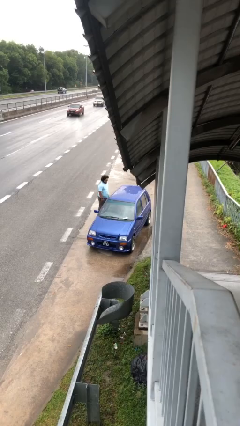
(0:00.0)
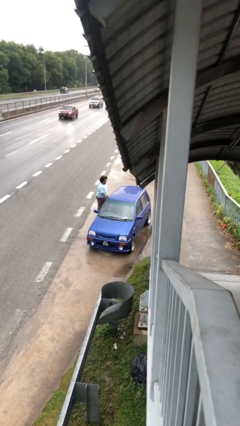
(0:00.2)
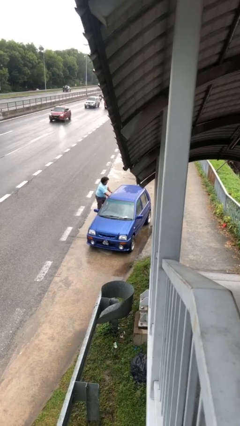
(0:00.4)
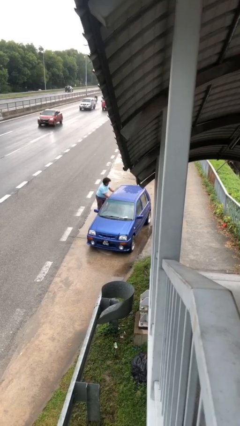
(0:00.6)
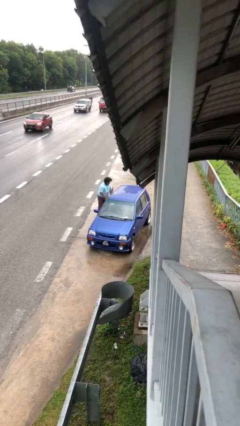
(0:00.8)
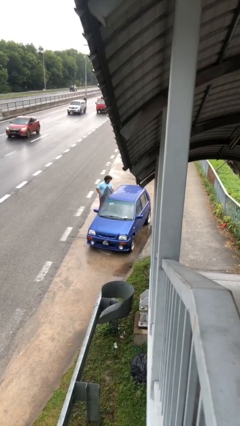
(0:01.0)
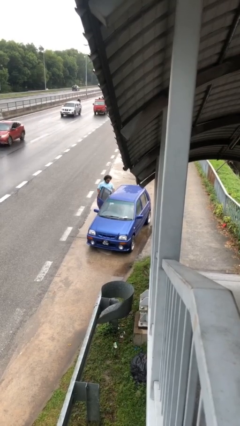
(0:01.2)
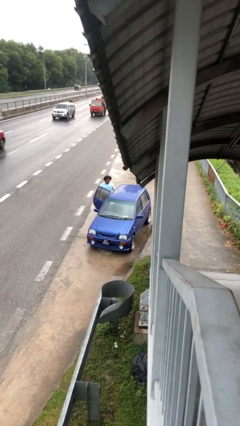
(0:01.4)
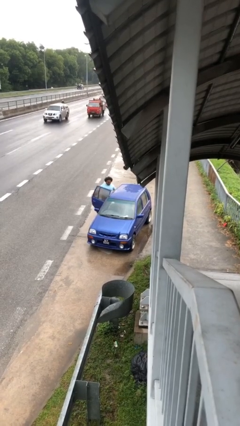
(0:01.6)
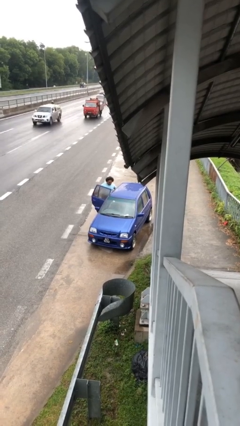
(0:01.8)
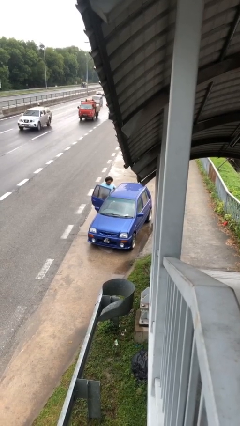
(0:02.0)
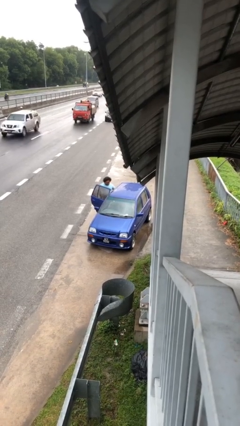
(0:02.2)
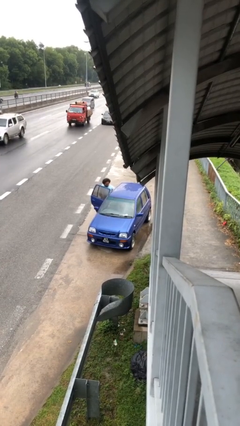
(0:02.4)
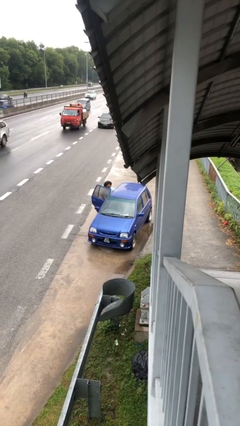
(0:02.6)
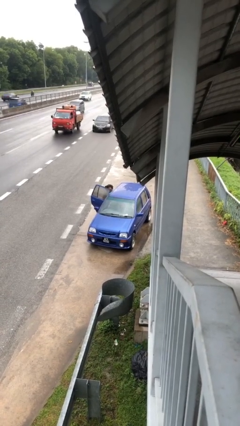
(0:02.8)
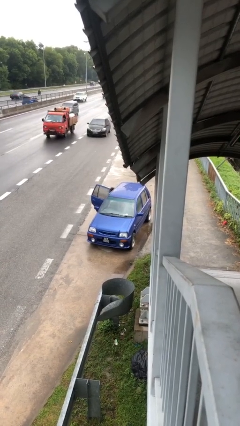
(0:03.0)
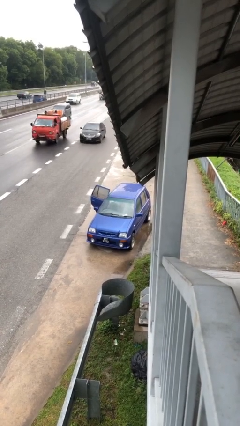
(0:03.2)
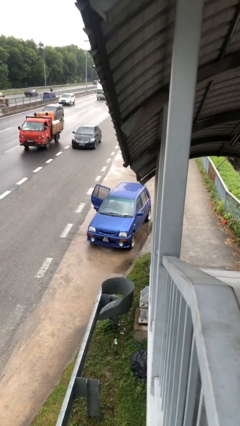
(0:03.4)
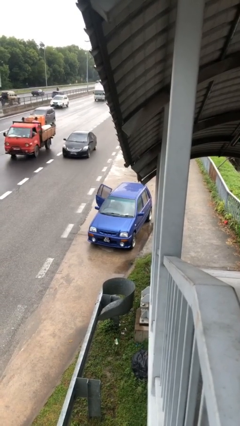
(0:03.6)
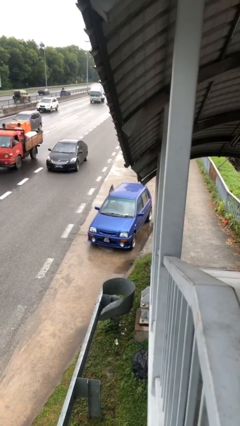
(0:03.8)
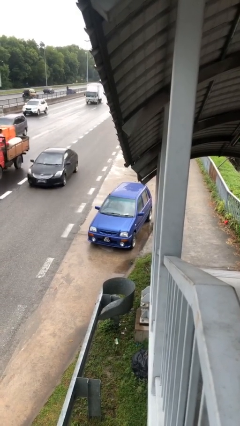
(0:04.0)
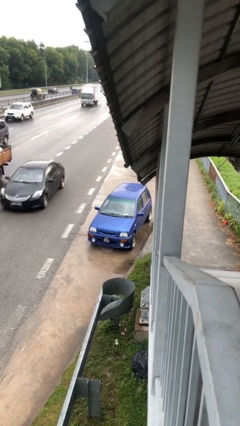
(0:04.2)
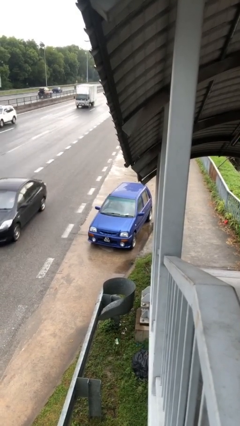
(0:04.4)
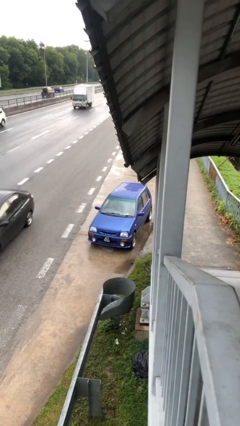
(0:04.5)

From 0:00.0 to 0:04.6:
car picks up person

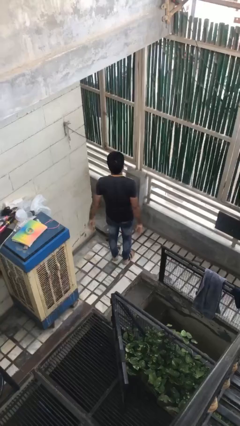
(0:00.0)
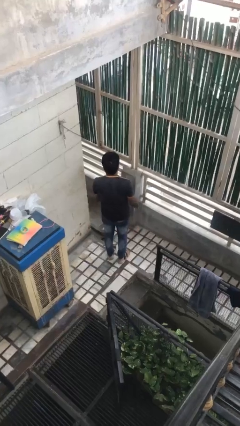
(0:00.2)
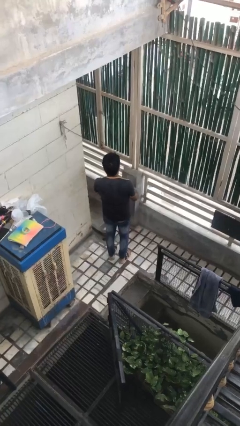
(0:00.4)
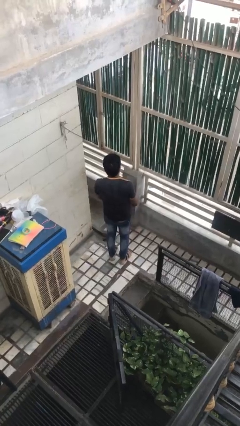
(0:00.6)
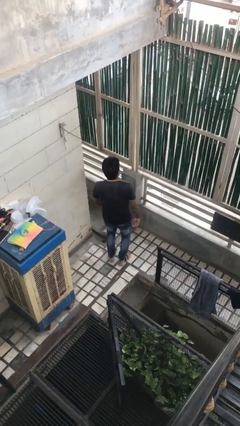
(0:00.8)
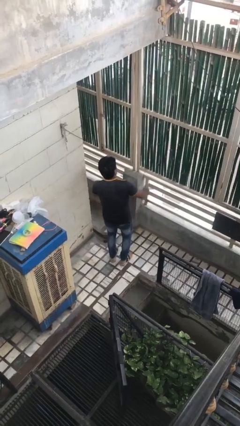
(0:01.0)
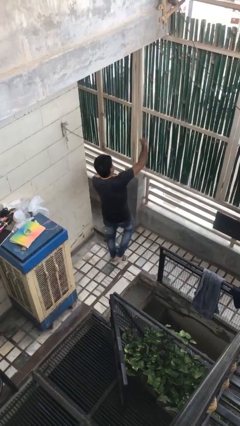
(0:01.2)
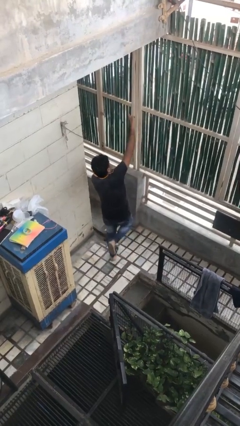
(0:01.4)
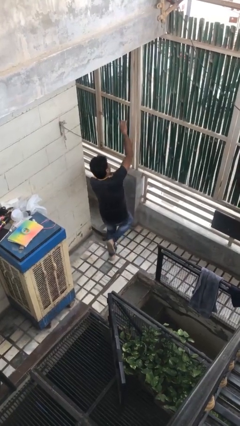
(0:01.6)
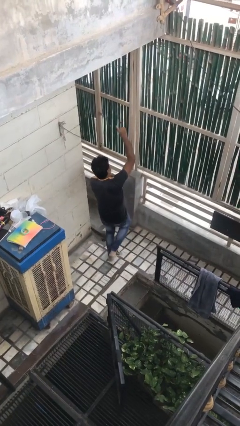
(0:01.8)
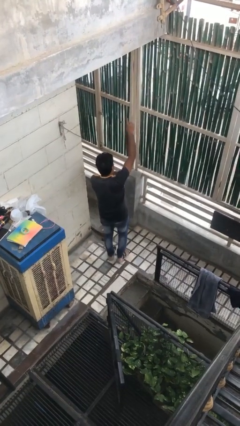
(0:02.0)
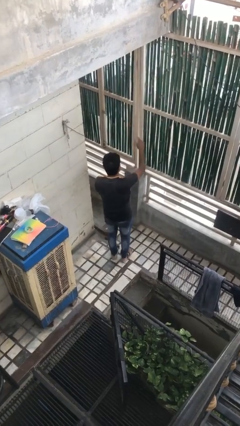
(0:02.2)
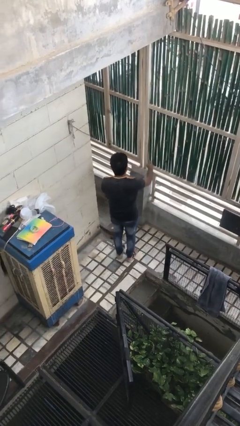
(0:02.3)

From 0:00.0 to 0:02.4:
person dances in place

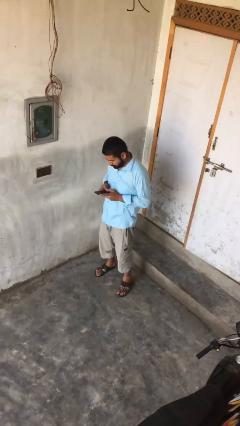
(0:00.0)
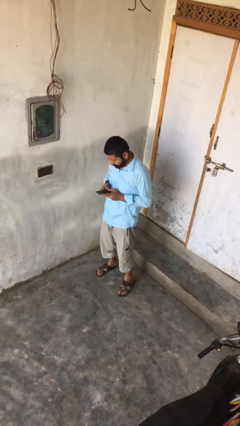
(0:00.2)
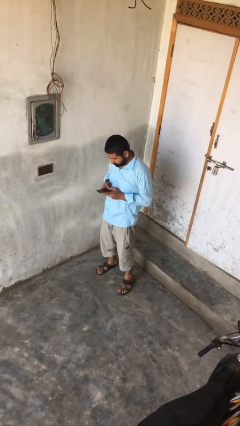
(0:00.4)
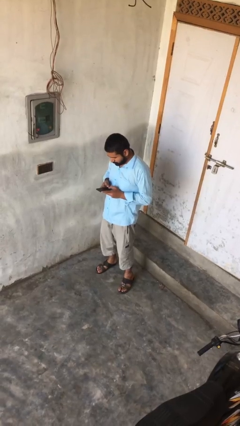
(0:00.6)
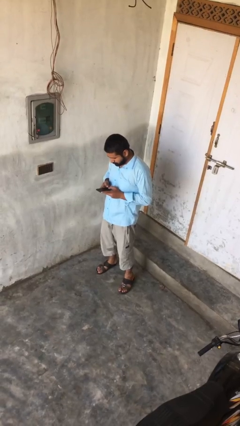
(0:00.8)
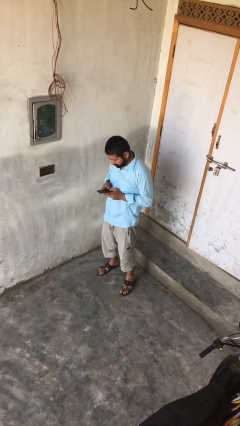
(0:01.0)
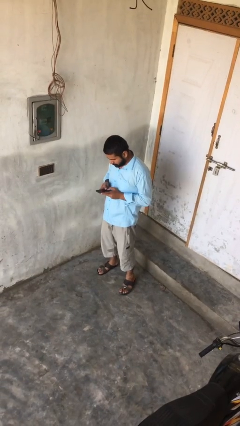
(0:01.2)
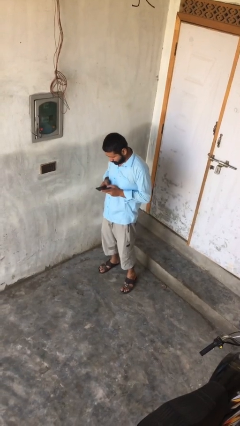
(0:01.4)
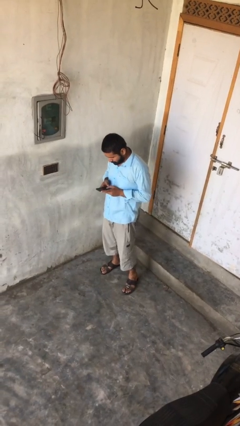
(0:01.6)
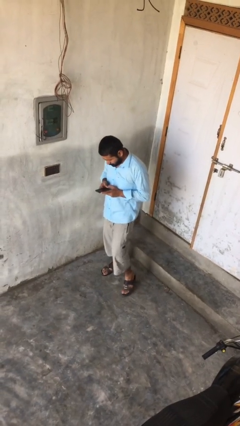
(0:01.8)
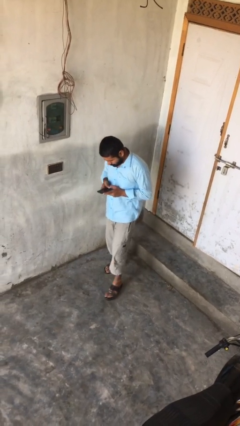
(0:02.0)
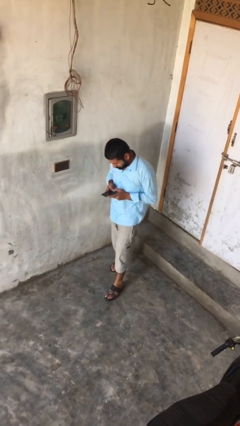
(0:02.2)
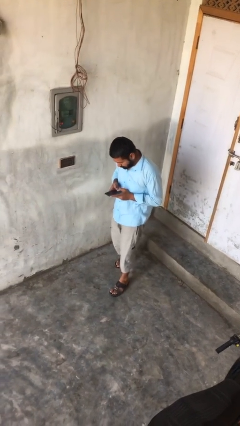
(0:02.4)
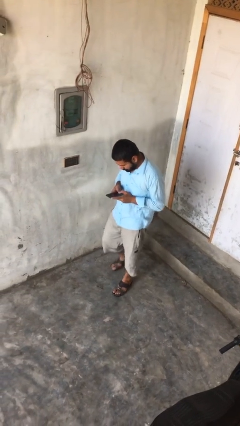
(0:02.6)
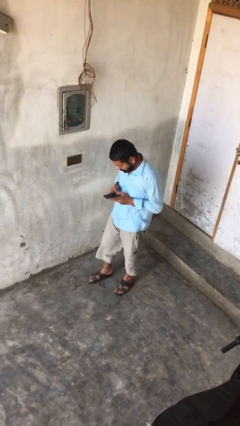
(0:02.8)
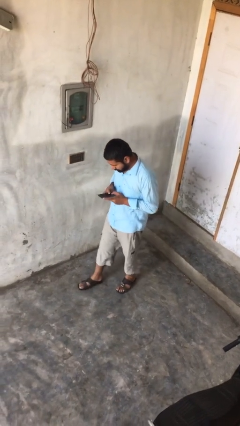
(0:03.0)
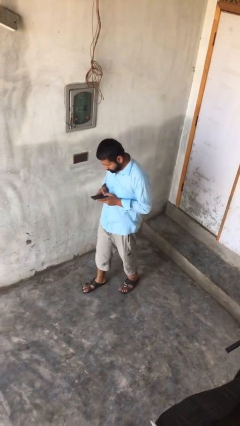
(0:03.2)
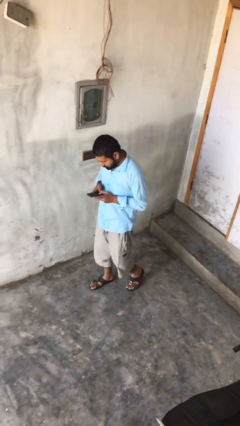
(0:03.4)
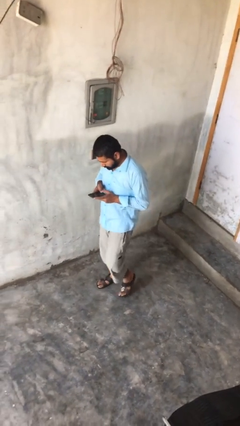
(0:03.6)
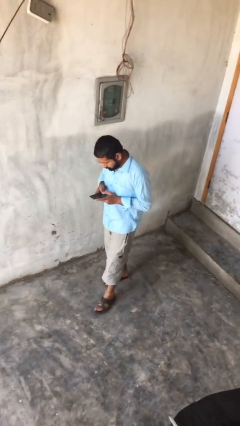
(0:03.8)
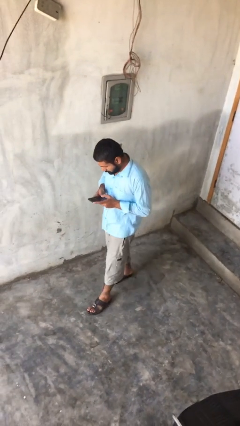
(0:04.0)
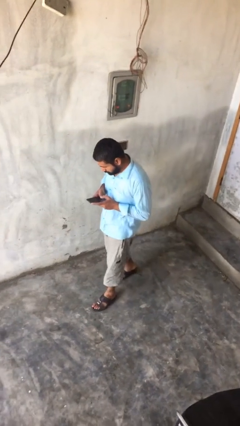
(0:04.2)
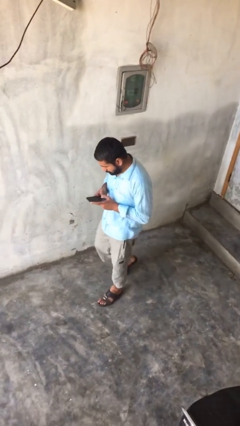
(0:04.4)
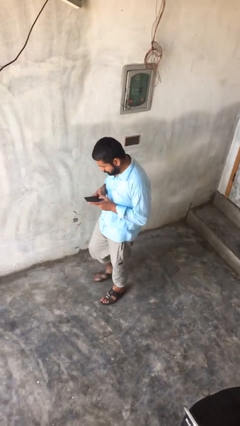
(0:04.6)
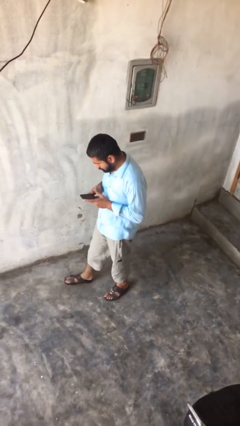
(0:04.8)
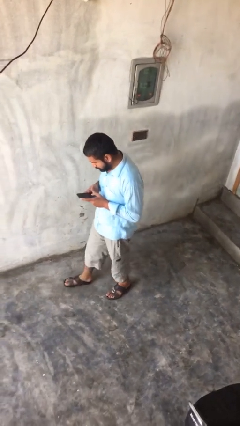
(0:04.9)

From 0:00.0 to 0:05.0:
person texts on phone

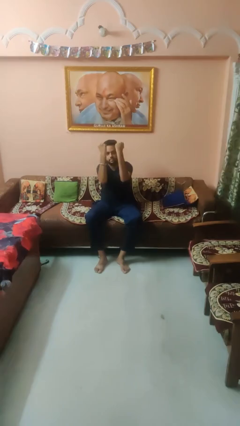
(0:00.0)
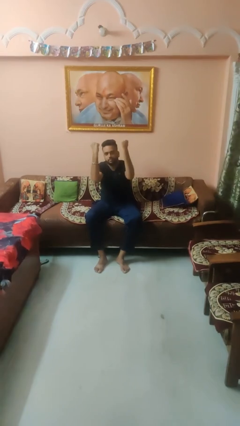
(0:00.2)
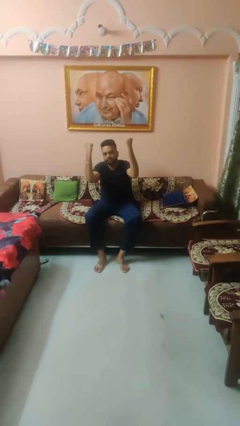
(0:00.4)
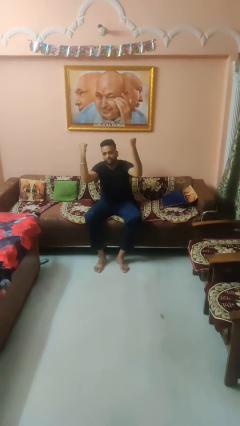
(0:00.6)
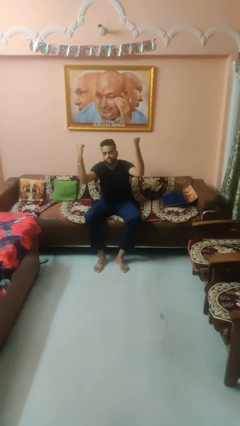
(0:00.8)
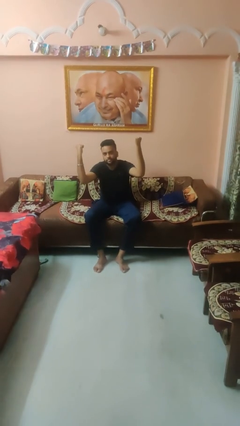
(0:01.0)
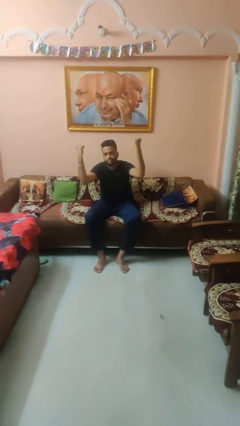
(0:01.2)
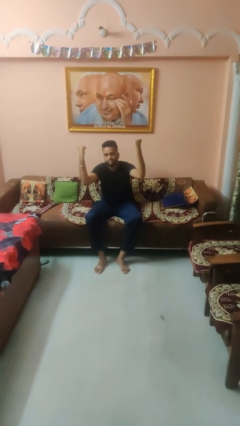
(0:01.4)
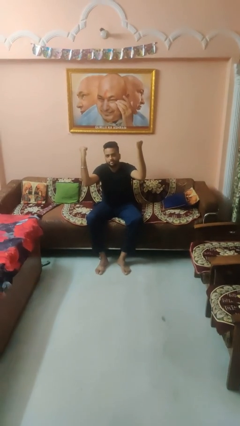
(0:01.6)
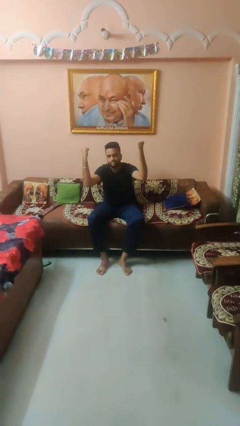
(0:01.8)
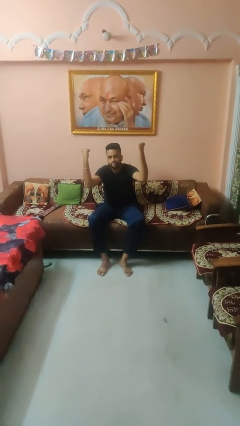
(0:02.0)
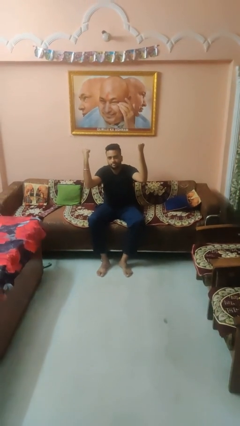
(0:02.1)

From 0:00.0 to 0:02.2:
person gestures zoom in

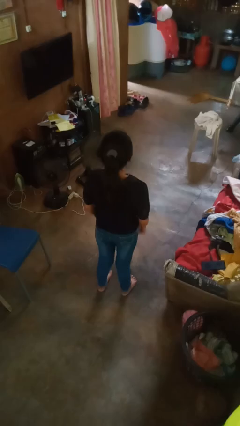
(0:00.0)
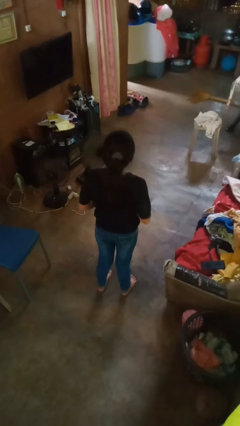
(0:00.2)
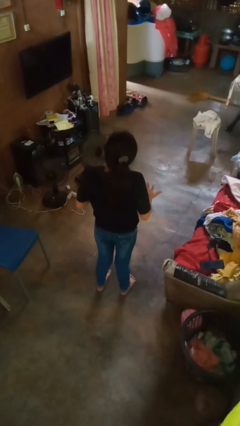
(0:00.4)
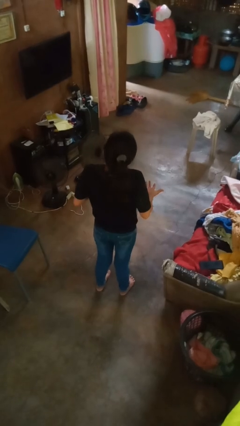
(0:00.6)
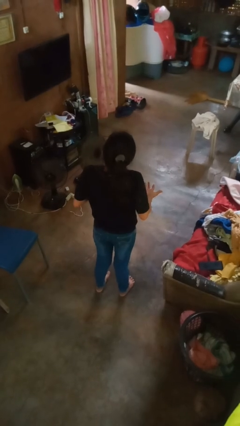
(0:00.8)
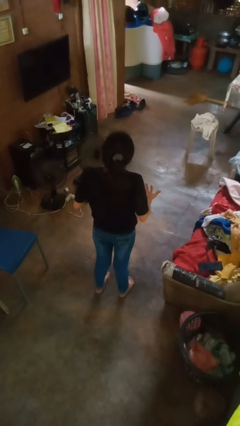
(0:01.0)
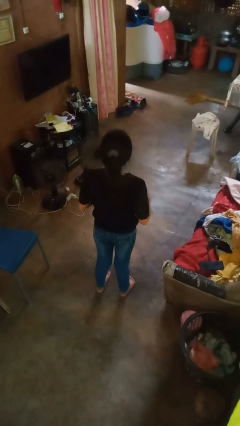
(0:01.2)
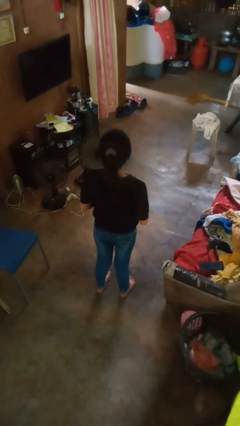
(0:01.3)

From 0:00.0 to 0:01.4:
person shrugs

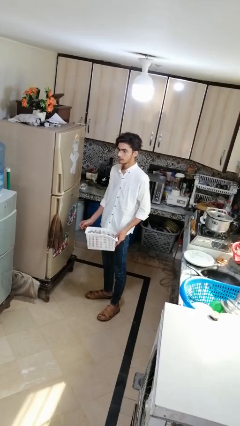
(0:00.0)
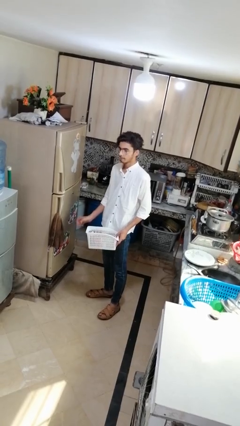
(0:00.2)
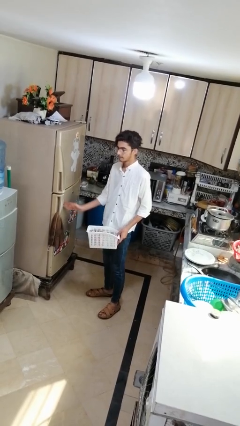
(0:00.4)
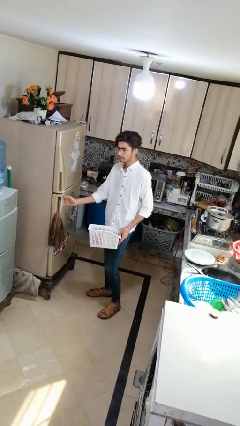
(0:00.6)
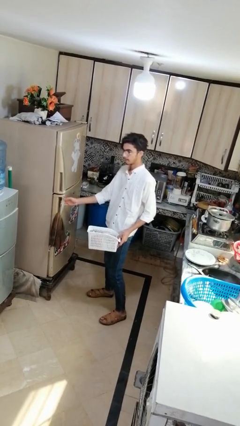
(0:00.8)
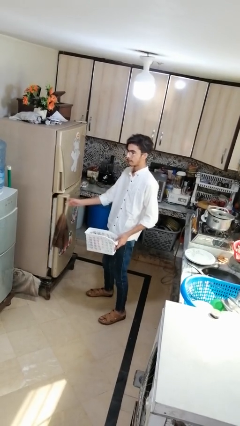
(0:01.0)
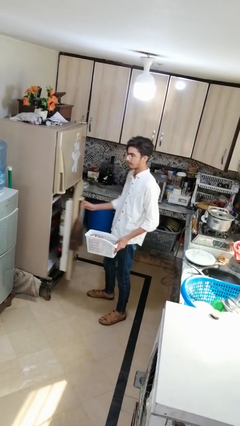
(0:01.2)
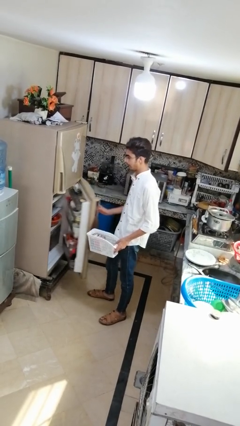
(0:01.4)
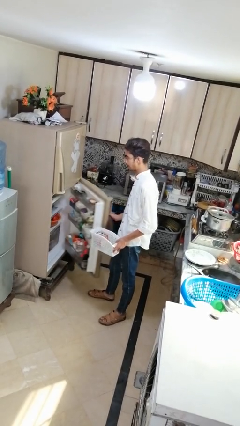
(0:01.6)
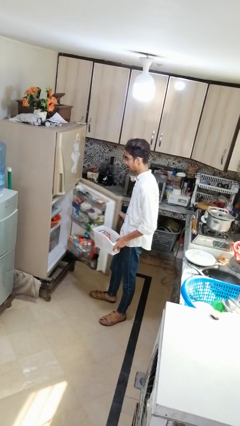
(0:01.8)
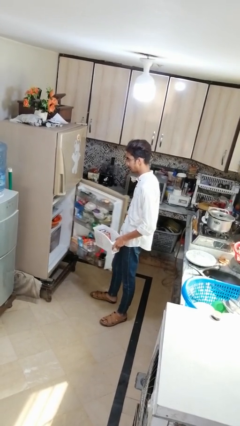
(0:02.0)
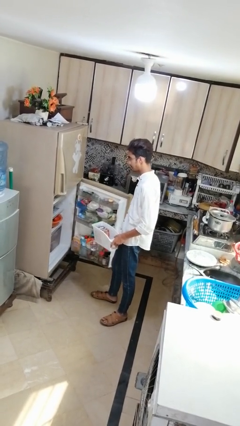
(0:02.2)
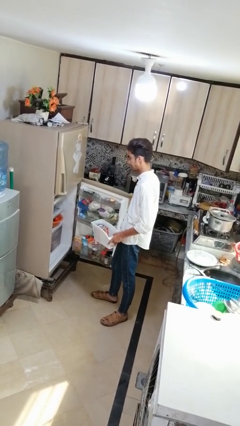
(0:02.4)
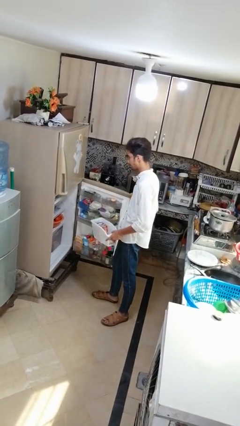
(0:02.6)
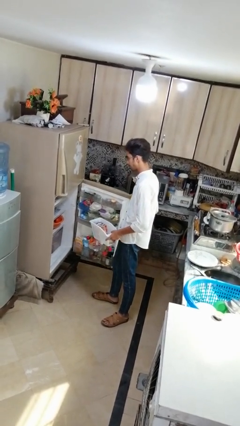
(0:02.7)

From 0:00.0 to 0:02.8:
person opens refrigerator
